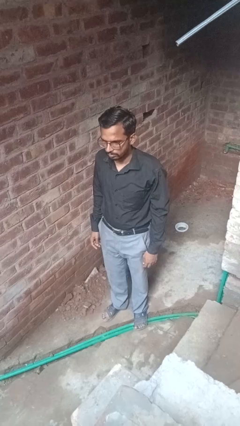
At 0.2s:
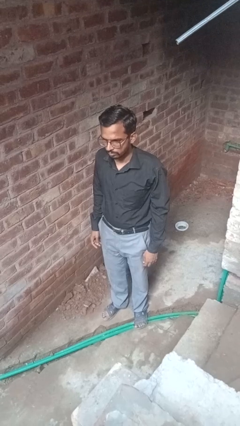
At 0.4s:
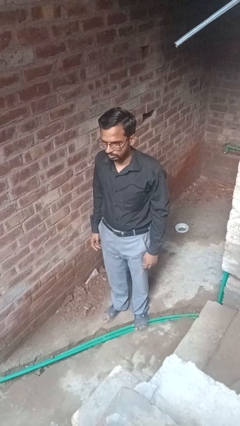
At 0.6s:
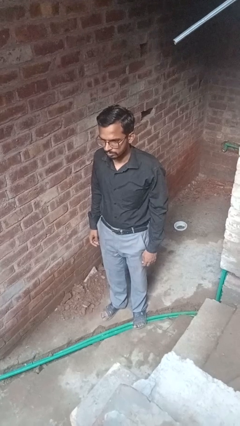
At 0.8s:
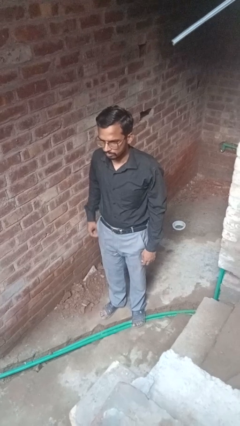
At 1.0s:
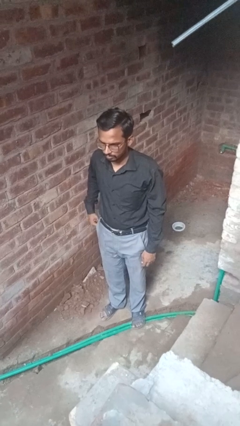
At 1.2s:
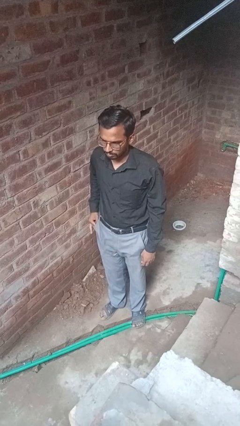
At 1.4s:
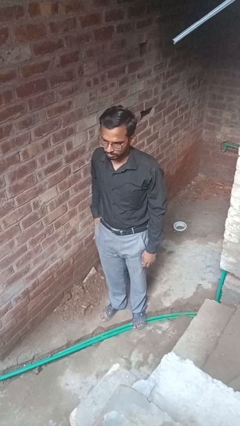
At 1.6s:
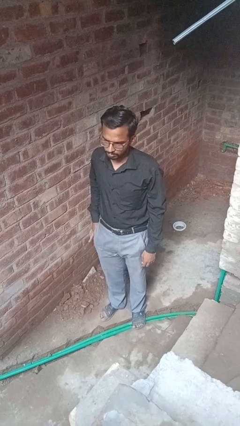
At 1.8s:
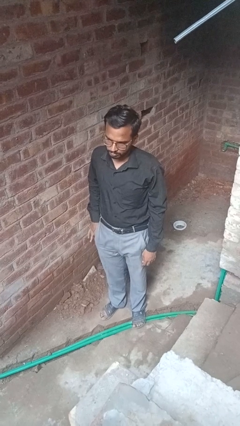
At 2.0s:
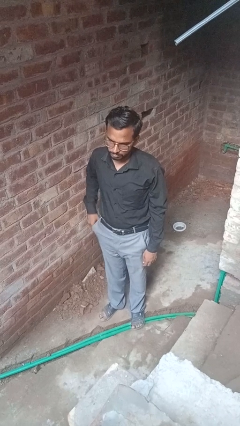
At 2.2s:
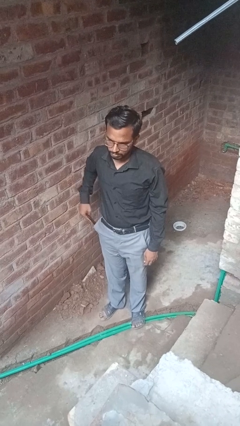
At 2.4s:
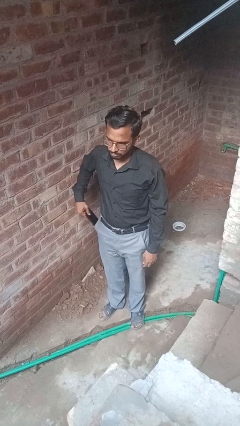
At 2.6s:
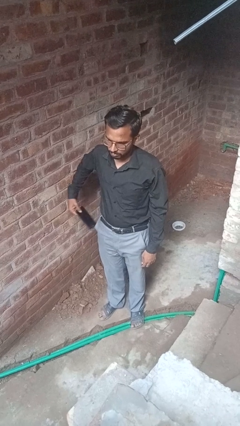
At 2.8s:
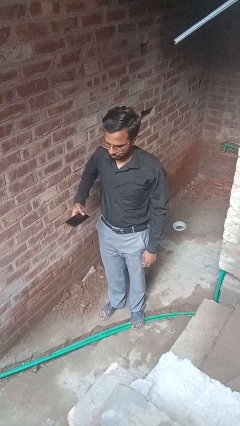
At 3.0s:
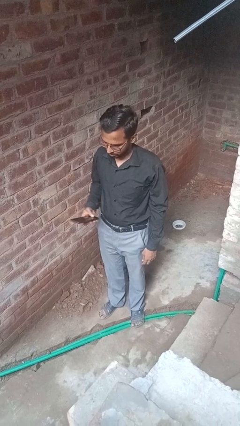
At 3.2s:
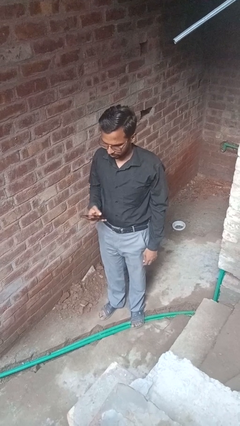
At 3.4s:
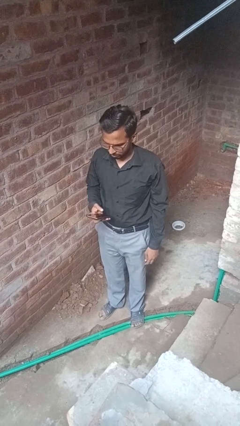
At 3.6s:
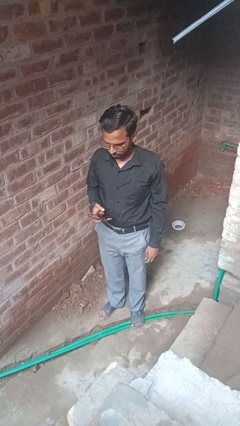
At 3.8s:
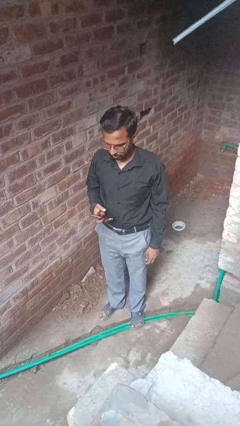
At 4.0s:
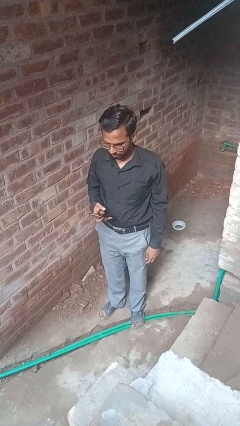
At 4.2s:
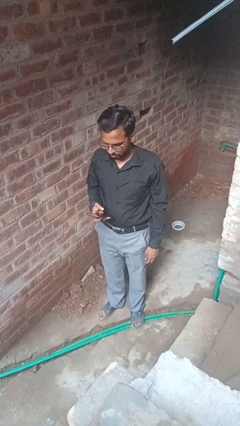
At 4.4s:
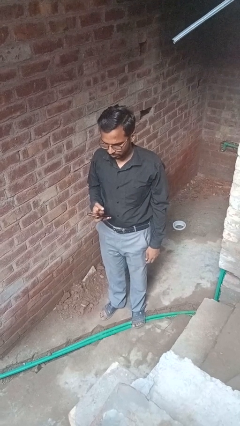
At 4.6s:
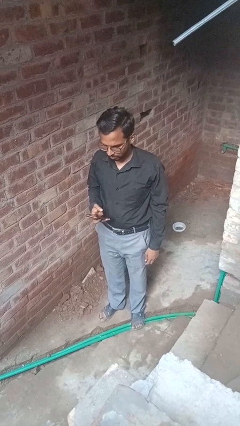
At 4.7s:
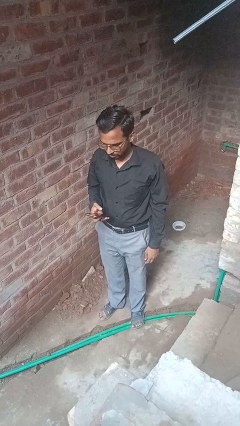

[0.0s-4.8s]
person takes phone from pocket

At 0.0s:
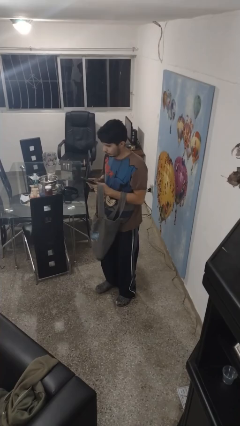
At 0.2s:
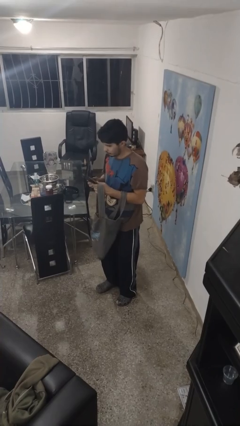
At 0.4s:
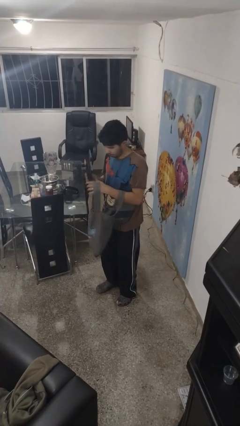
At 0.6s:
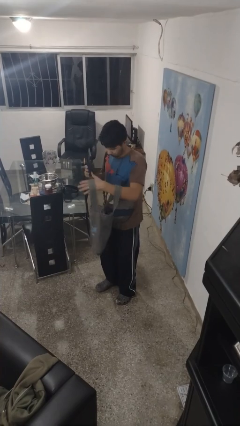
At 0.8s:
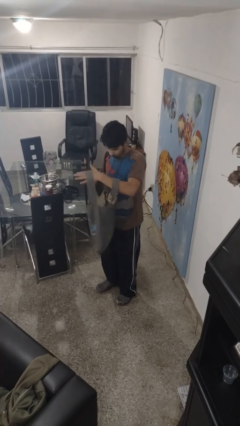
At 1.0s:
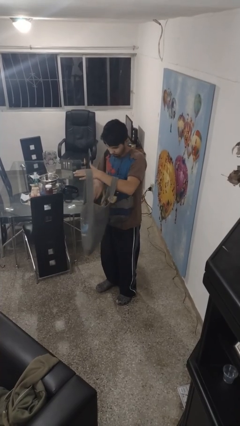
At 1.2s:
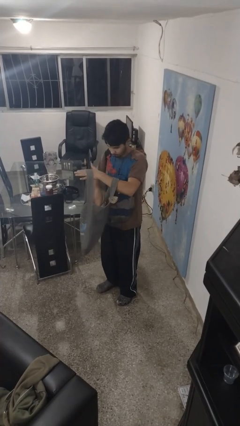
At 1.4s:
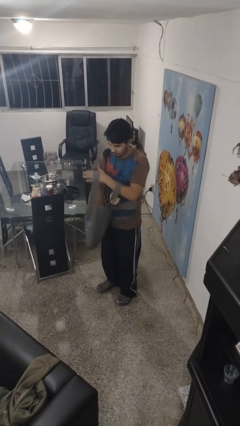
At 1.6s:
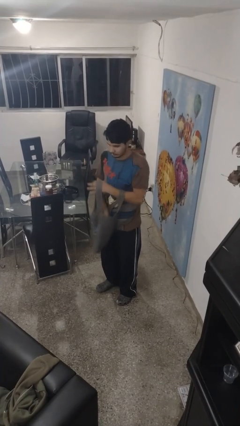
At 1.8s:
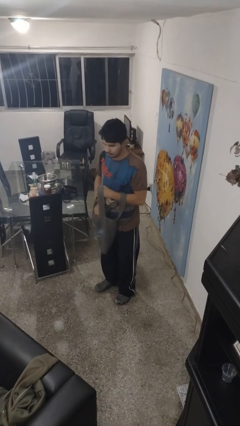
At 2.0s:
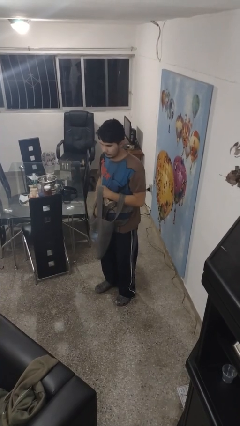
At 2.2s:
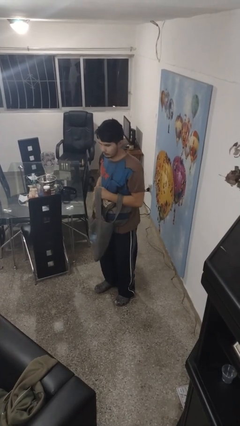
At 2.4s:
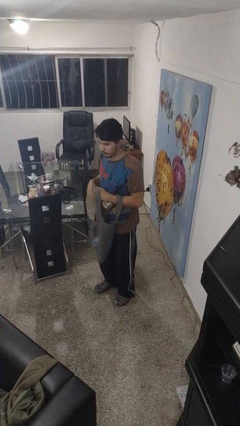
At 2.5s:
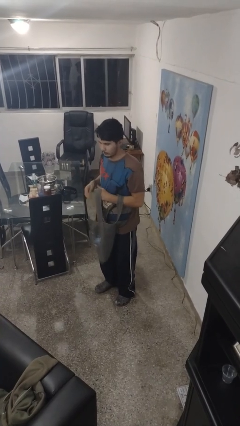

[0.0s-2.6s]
person puts object into purse

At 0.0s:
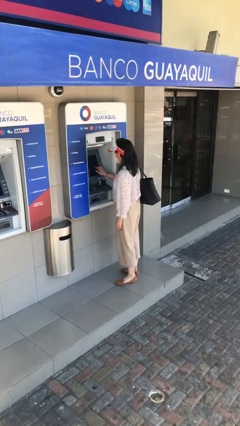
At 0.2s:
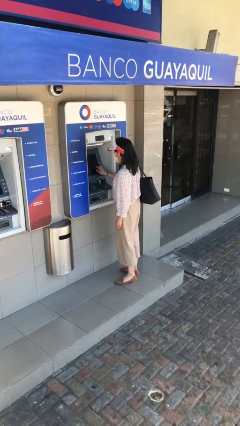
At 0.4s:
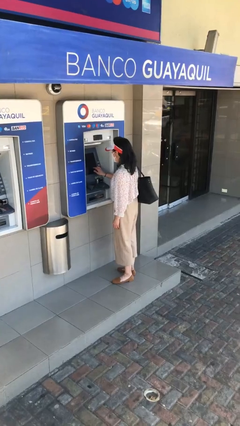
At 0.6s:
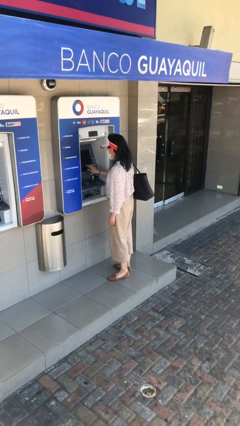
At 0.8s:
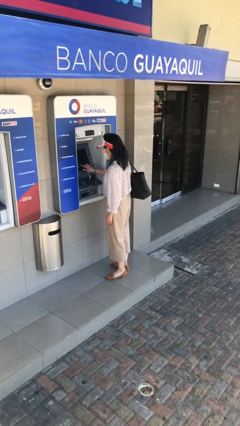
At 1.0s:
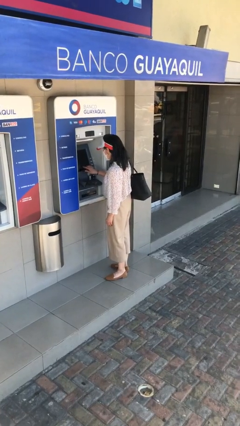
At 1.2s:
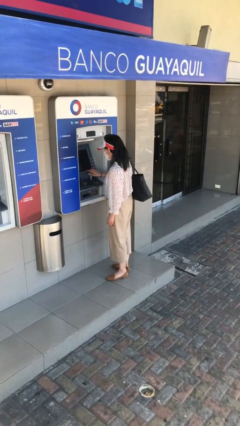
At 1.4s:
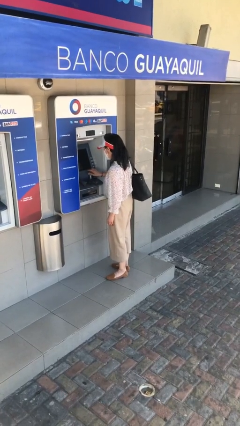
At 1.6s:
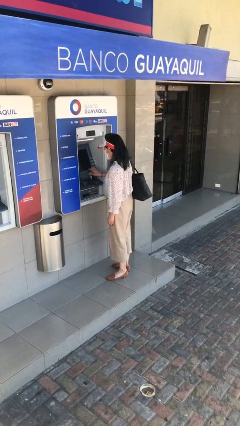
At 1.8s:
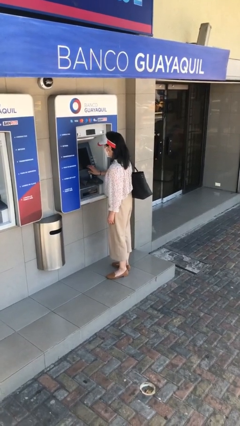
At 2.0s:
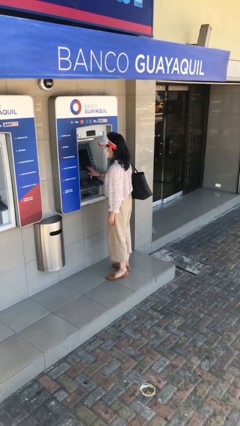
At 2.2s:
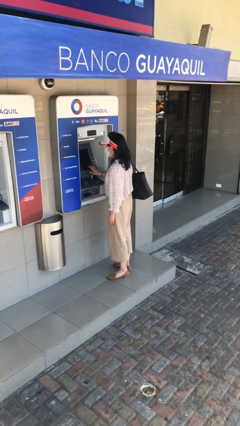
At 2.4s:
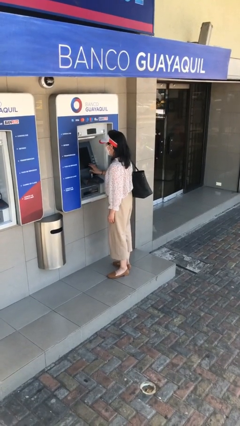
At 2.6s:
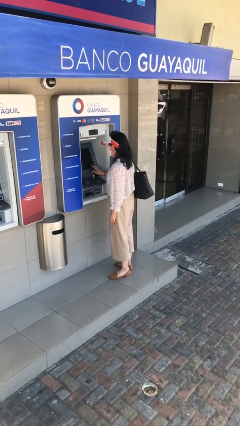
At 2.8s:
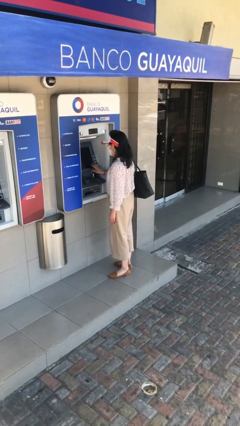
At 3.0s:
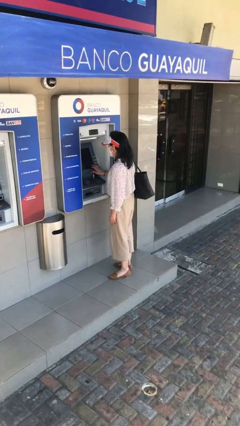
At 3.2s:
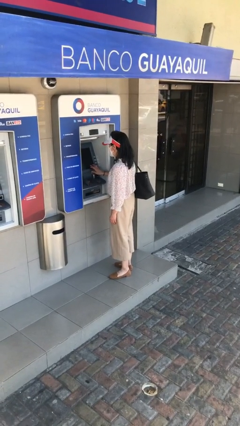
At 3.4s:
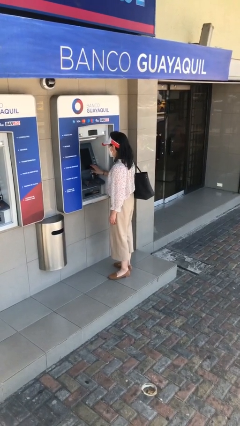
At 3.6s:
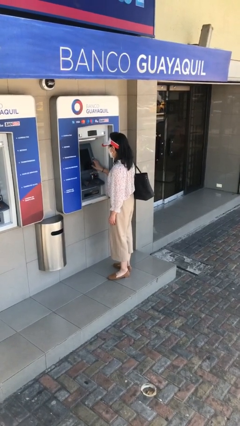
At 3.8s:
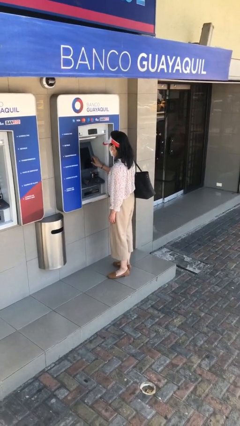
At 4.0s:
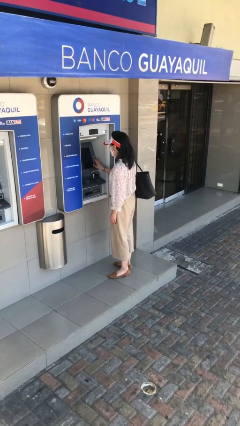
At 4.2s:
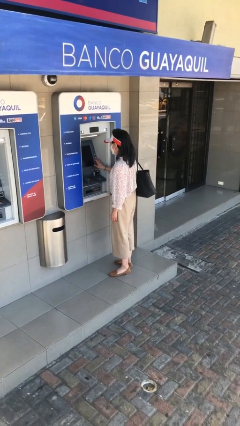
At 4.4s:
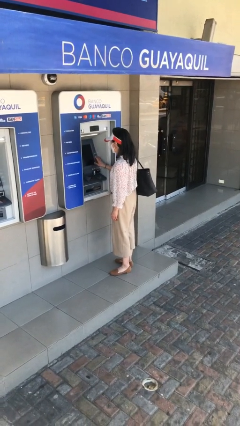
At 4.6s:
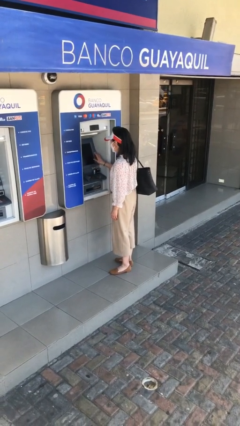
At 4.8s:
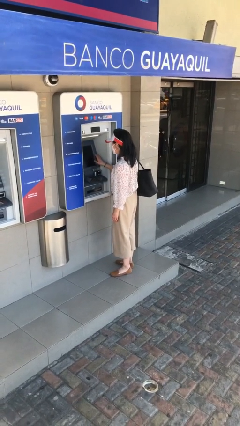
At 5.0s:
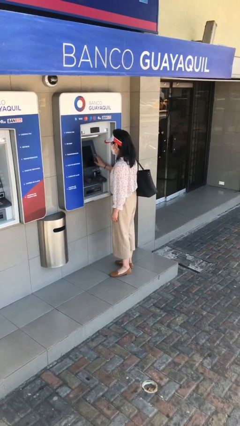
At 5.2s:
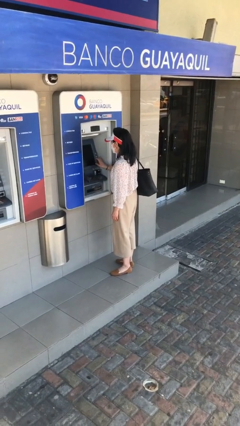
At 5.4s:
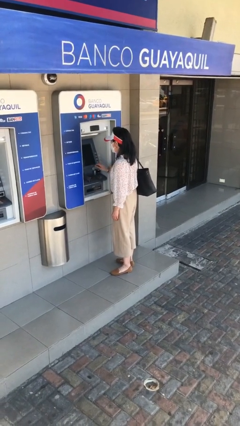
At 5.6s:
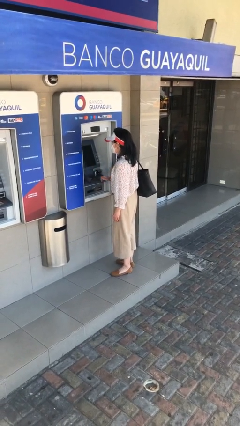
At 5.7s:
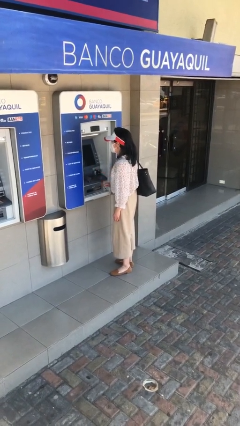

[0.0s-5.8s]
person purchases from machine

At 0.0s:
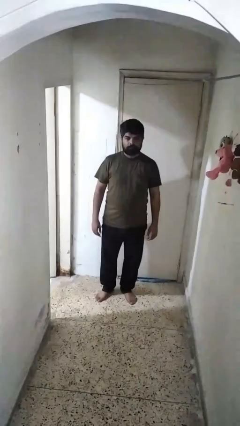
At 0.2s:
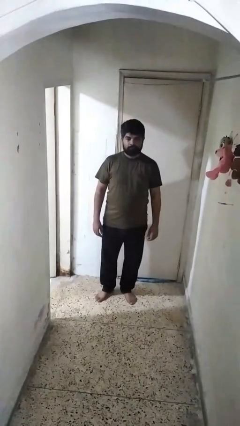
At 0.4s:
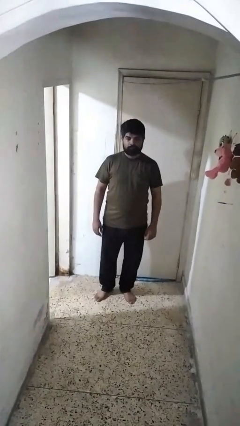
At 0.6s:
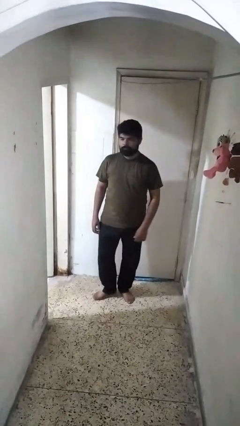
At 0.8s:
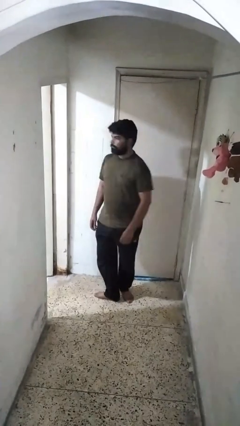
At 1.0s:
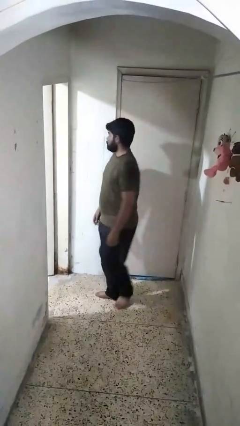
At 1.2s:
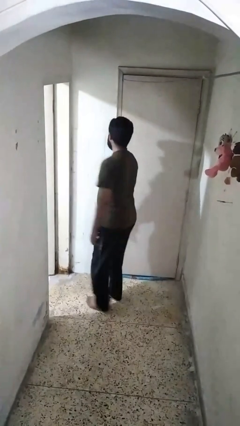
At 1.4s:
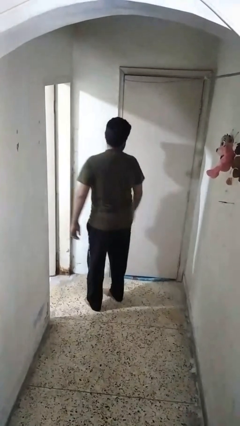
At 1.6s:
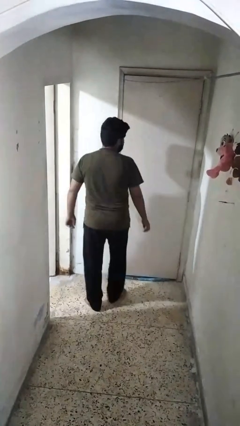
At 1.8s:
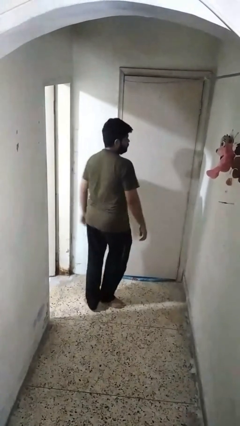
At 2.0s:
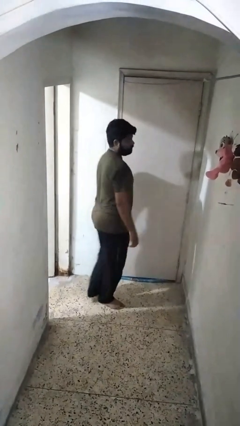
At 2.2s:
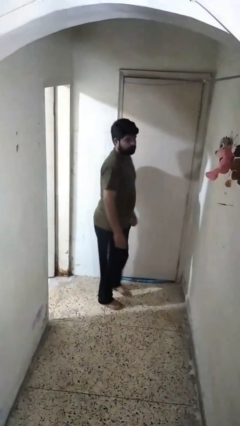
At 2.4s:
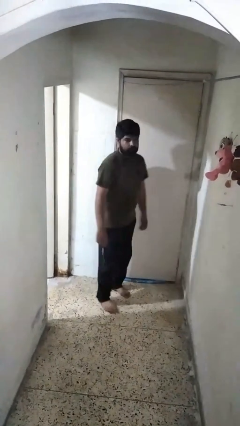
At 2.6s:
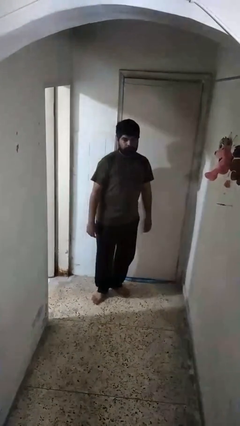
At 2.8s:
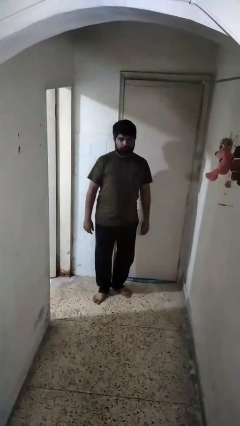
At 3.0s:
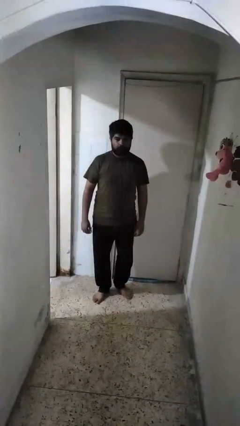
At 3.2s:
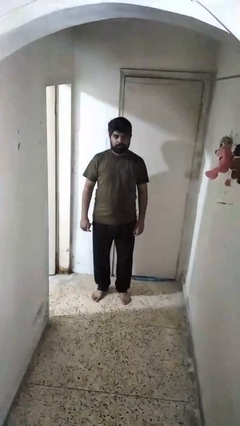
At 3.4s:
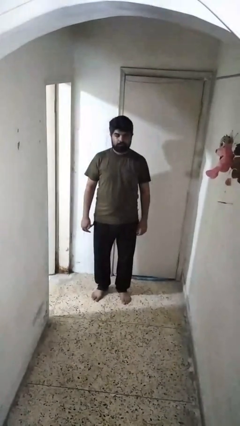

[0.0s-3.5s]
person twirls

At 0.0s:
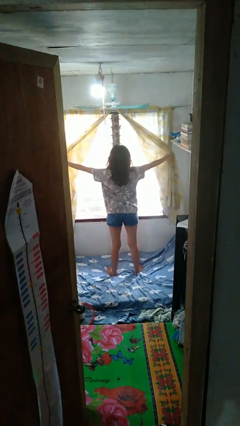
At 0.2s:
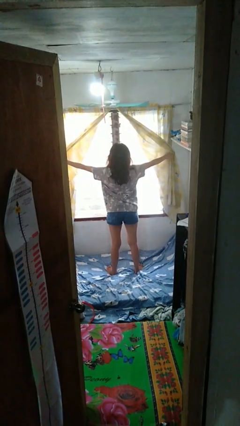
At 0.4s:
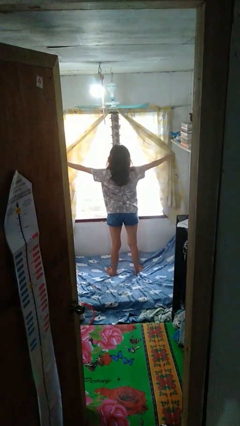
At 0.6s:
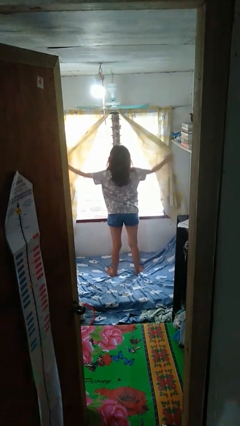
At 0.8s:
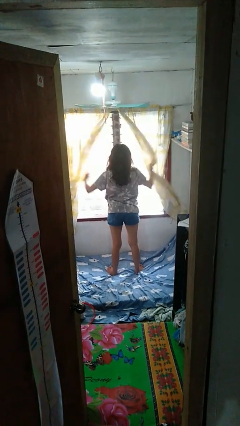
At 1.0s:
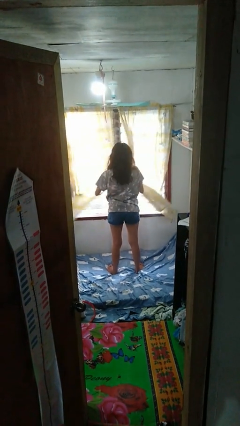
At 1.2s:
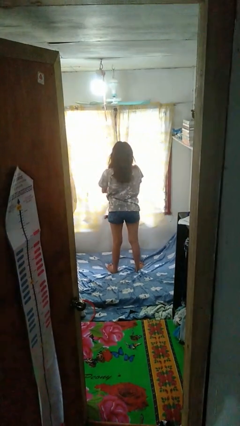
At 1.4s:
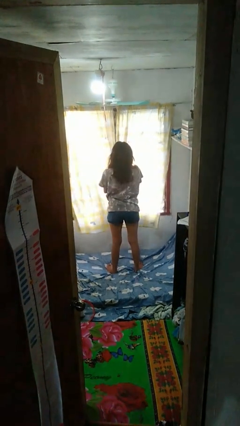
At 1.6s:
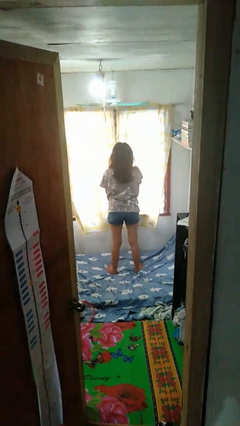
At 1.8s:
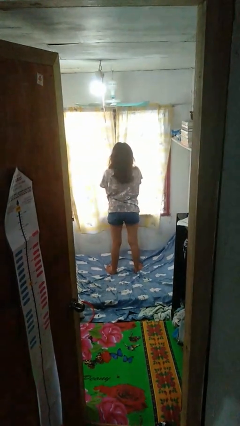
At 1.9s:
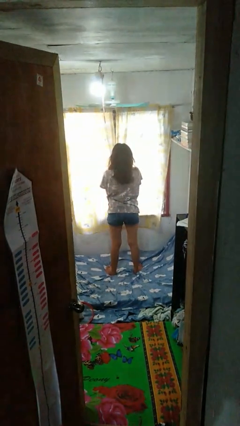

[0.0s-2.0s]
person closes curtains
